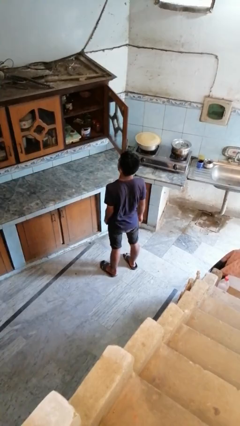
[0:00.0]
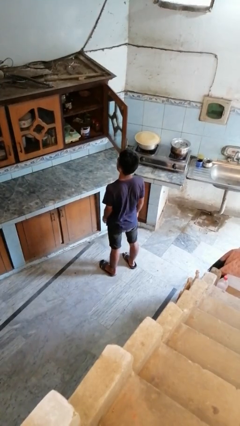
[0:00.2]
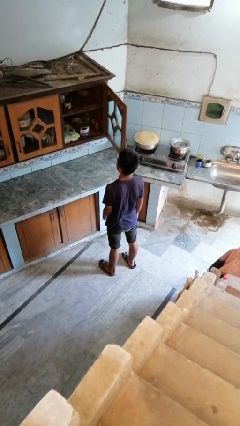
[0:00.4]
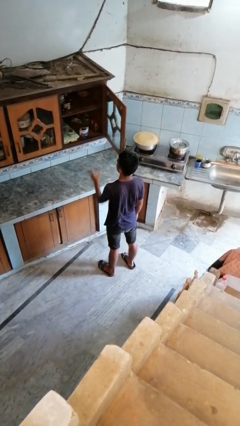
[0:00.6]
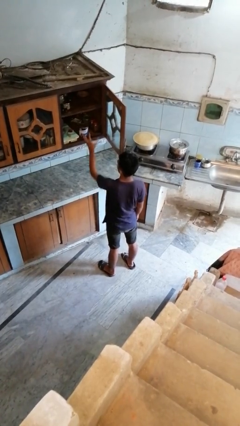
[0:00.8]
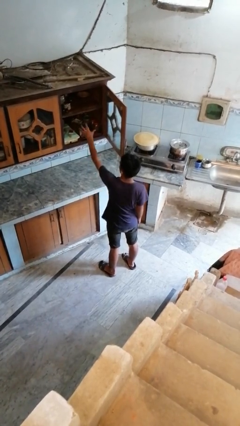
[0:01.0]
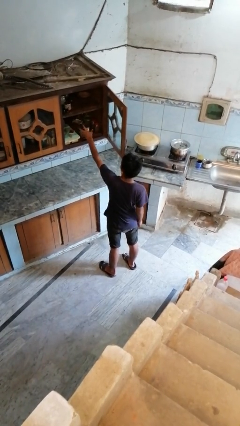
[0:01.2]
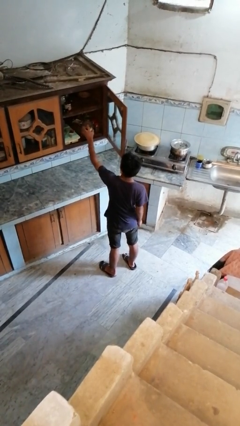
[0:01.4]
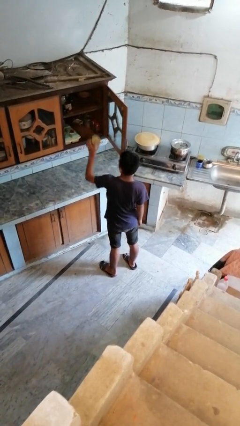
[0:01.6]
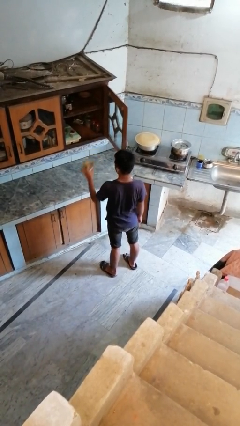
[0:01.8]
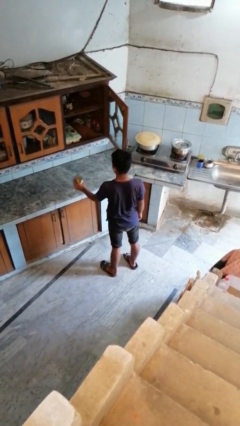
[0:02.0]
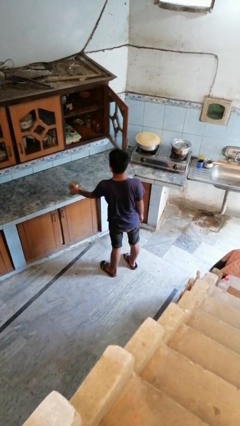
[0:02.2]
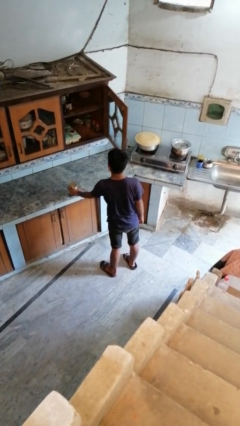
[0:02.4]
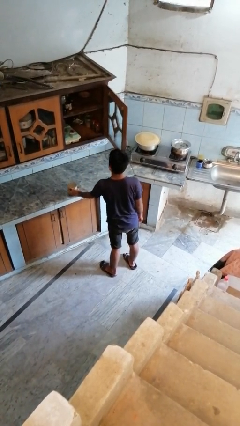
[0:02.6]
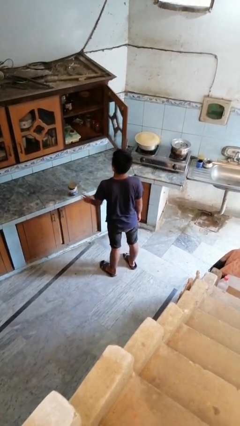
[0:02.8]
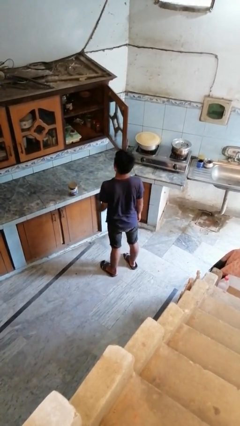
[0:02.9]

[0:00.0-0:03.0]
person takes object from cabinet

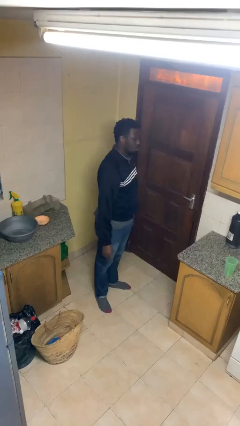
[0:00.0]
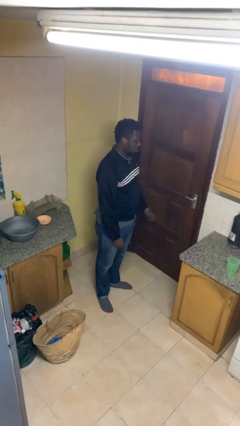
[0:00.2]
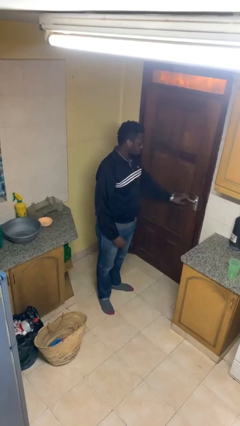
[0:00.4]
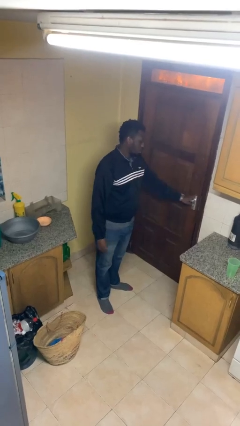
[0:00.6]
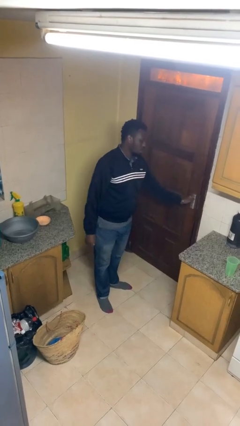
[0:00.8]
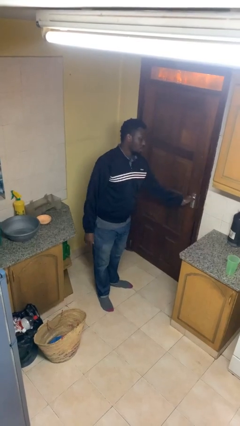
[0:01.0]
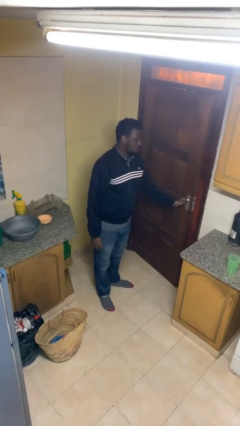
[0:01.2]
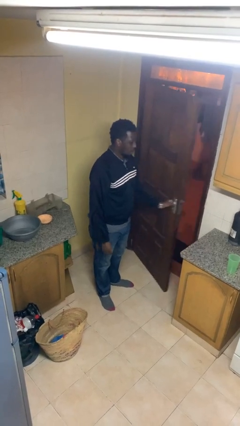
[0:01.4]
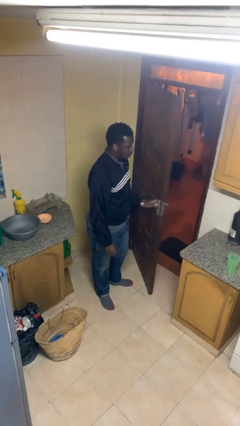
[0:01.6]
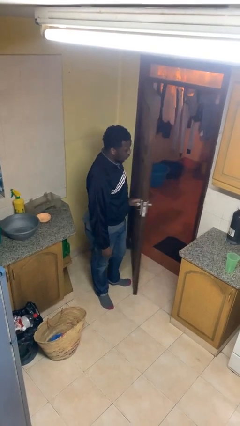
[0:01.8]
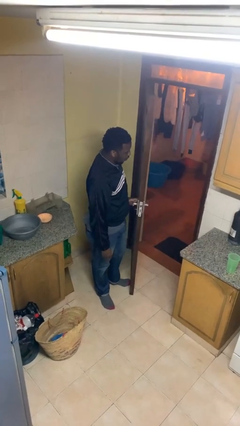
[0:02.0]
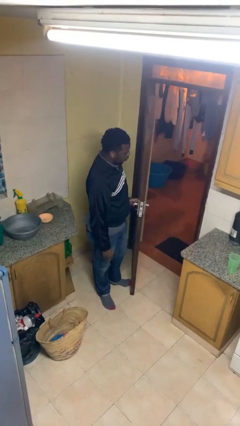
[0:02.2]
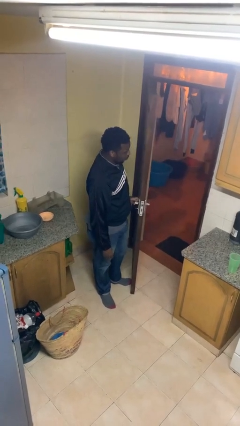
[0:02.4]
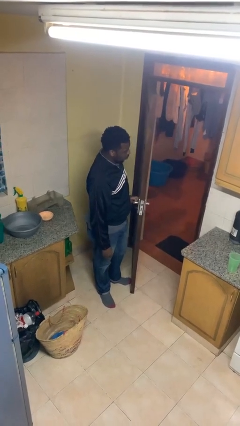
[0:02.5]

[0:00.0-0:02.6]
person opens facility door

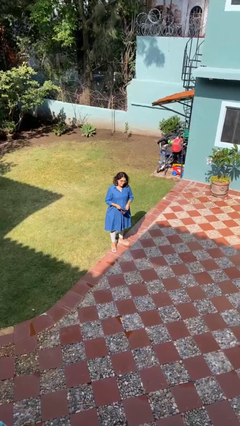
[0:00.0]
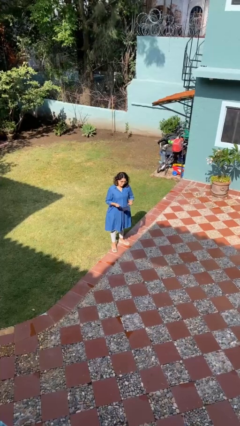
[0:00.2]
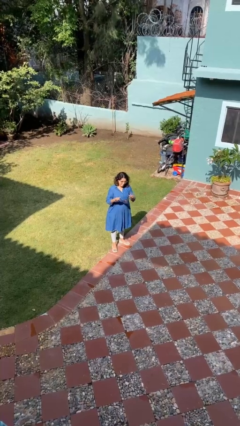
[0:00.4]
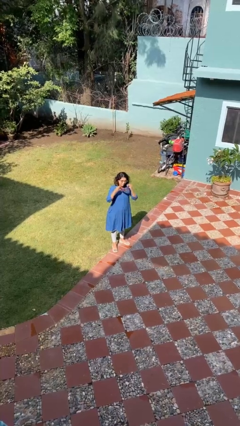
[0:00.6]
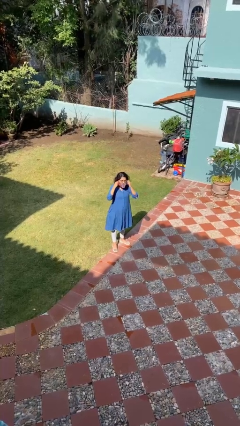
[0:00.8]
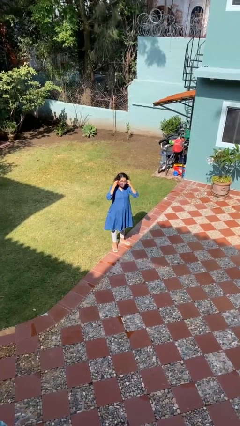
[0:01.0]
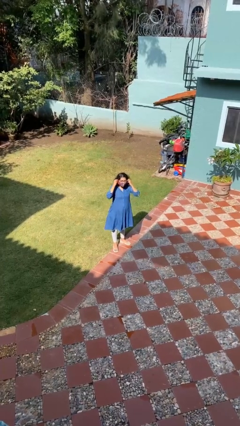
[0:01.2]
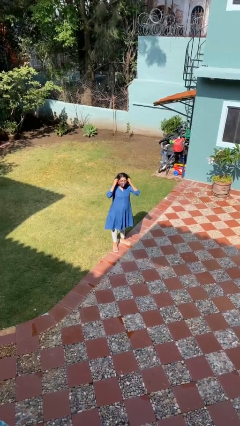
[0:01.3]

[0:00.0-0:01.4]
person puts on facemask

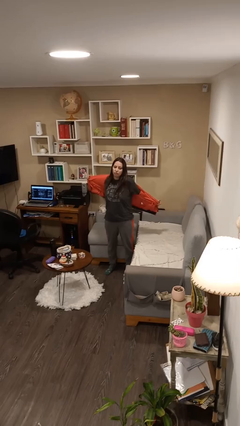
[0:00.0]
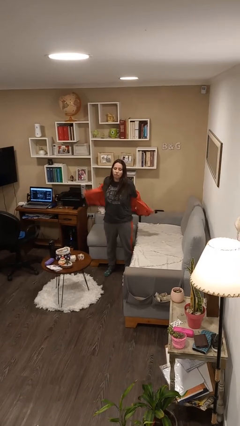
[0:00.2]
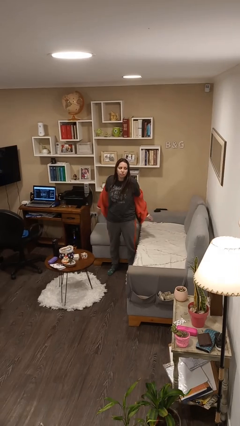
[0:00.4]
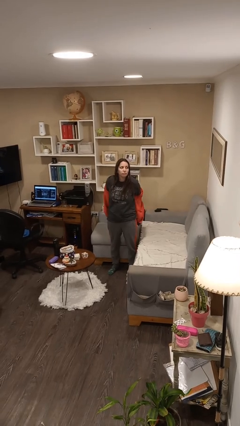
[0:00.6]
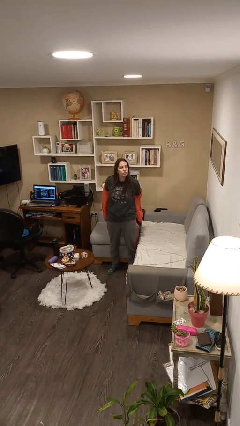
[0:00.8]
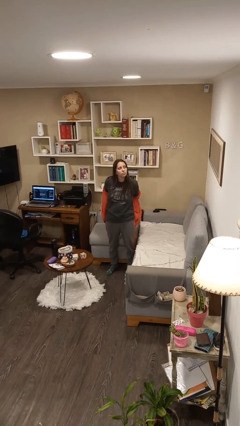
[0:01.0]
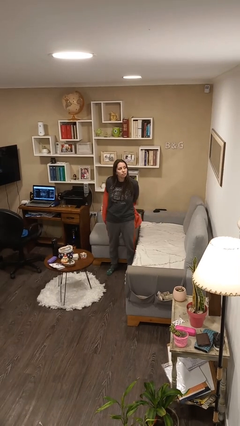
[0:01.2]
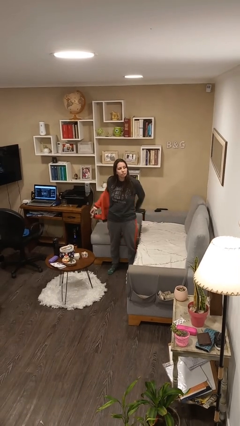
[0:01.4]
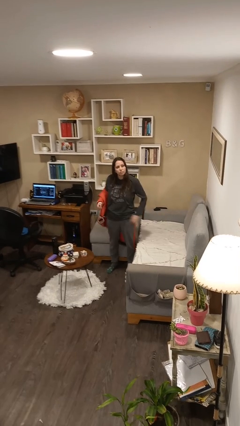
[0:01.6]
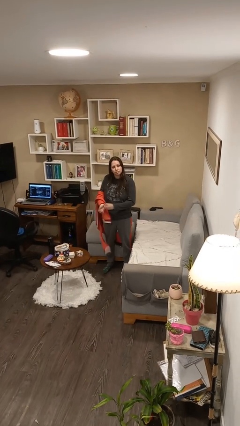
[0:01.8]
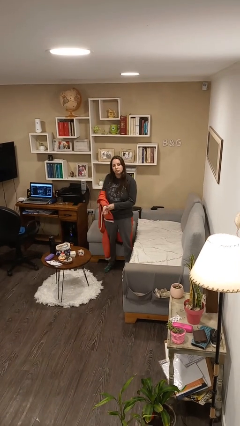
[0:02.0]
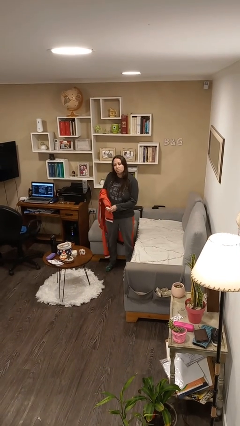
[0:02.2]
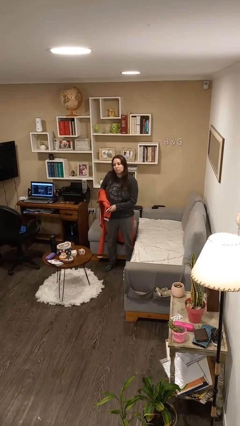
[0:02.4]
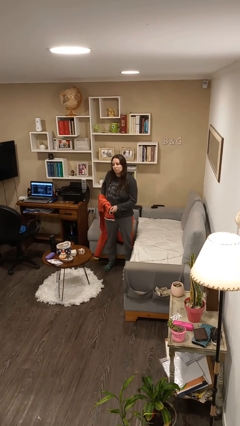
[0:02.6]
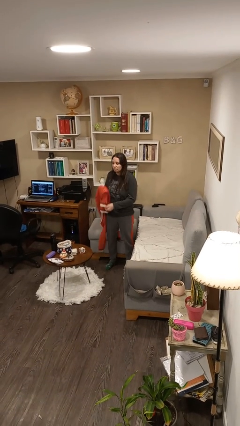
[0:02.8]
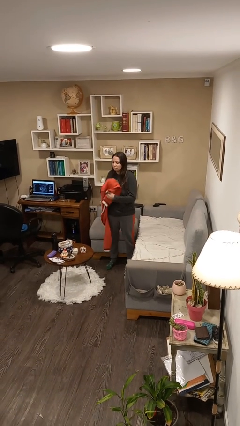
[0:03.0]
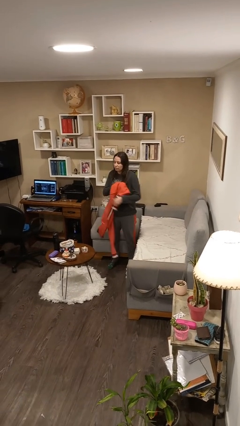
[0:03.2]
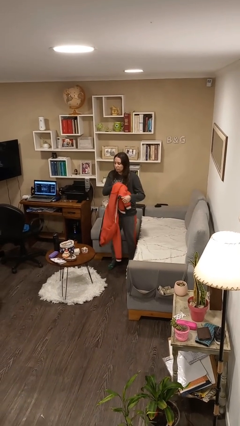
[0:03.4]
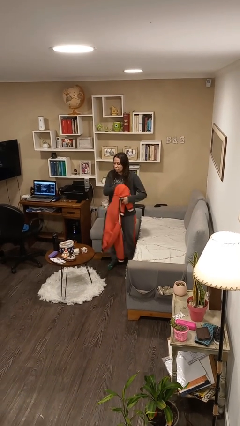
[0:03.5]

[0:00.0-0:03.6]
person takes off jacket

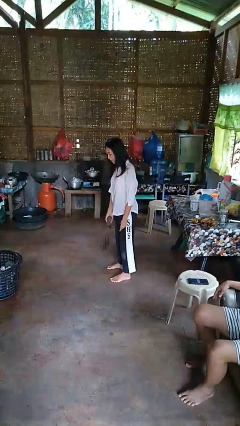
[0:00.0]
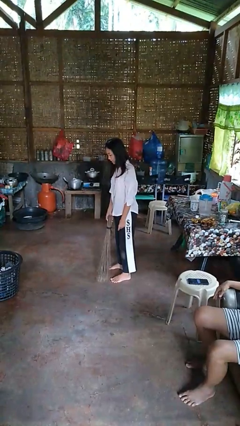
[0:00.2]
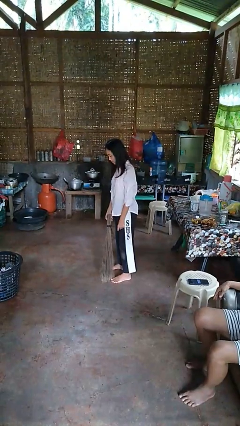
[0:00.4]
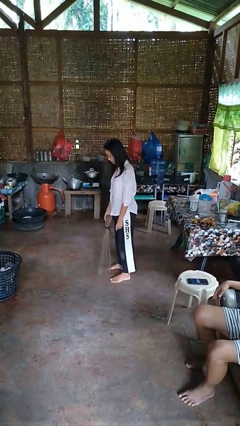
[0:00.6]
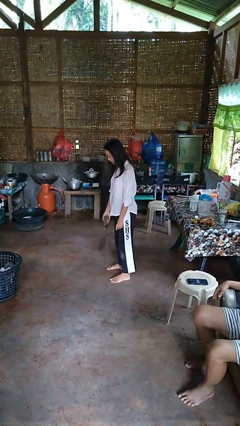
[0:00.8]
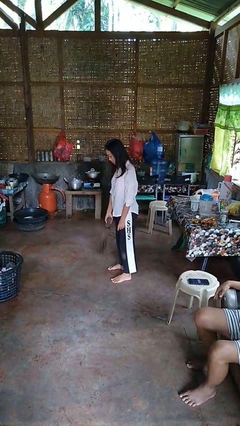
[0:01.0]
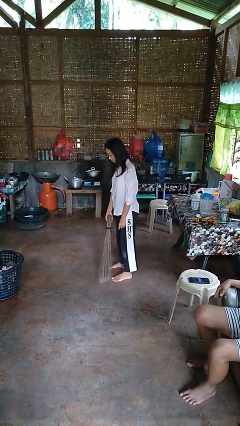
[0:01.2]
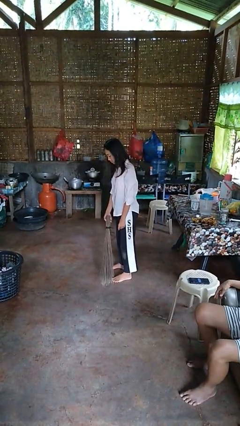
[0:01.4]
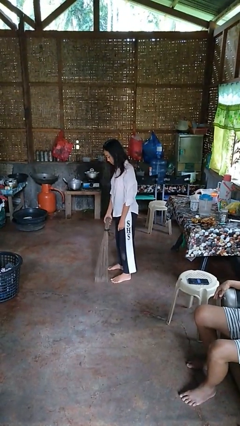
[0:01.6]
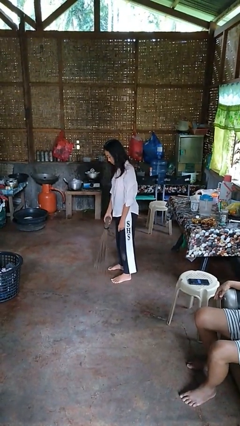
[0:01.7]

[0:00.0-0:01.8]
person sweeps floor

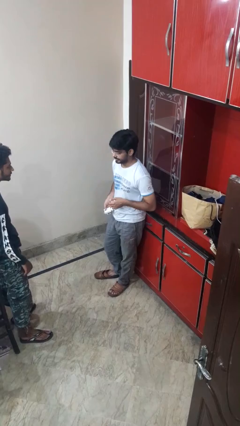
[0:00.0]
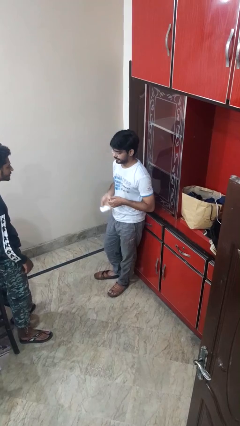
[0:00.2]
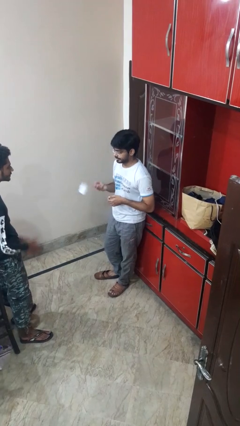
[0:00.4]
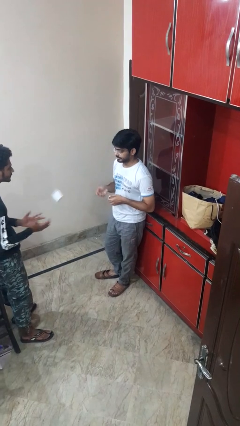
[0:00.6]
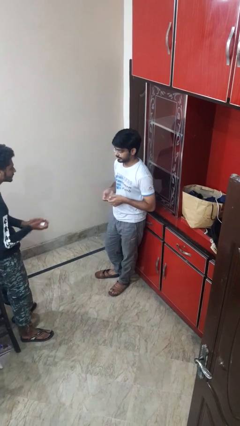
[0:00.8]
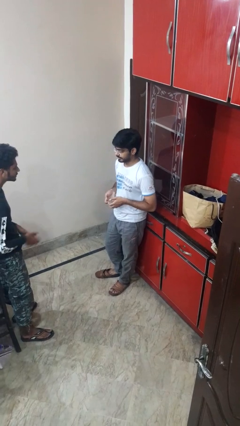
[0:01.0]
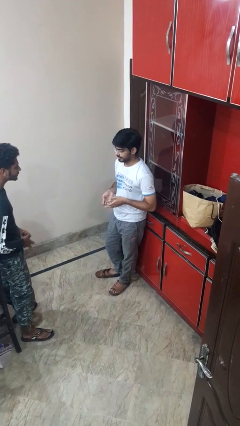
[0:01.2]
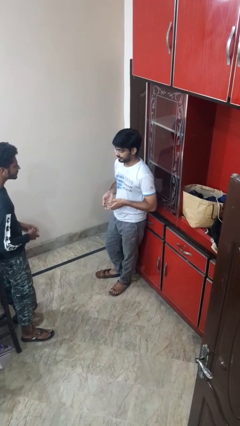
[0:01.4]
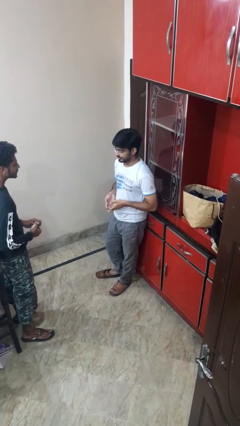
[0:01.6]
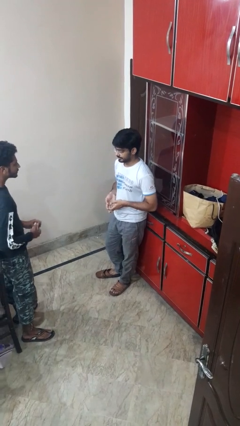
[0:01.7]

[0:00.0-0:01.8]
person throws object to person

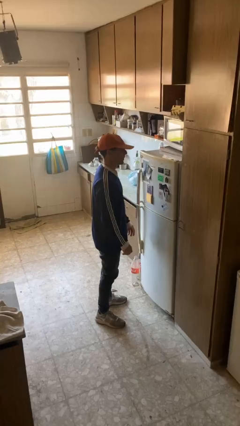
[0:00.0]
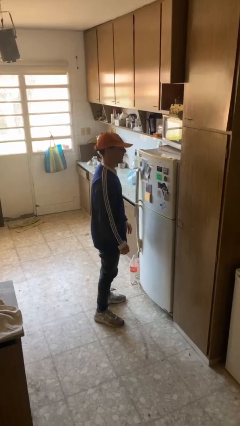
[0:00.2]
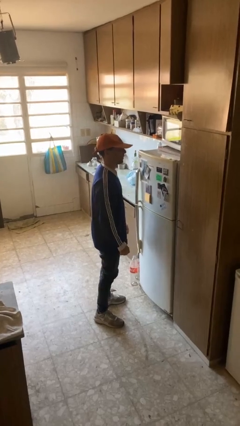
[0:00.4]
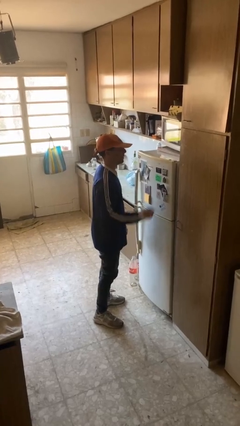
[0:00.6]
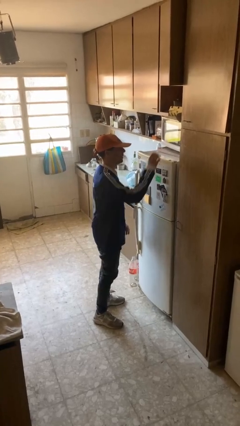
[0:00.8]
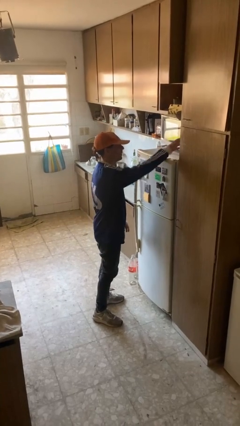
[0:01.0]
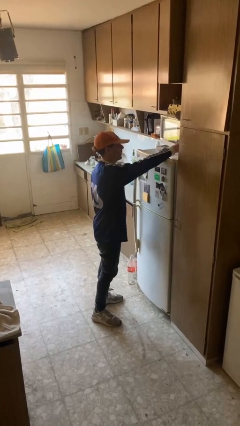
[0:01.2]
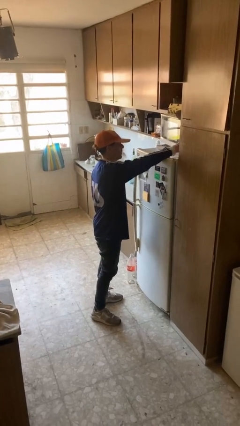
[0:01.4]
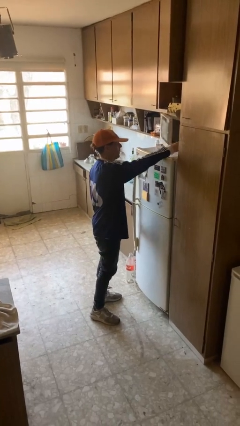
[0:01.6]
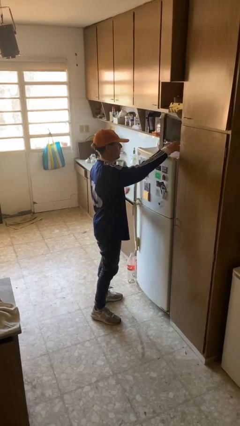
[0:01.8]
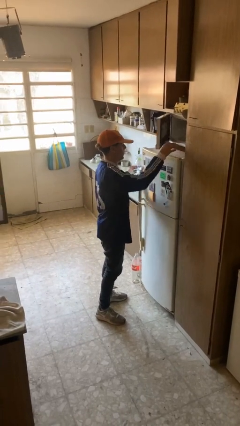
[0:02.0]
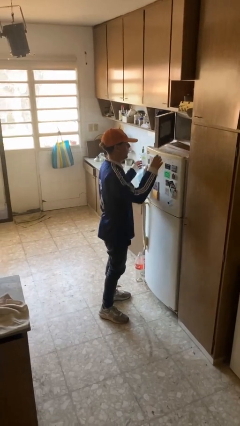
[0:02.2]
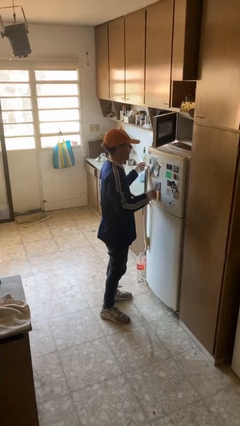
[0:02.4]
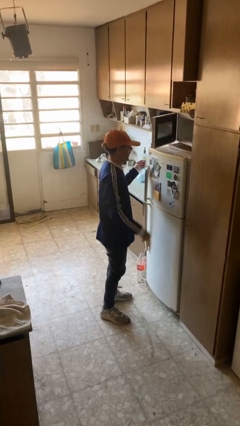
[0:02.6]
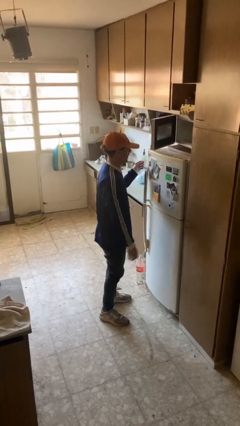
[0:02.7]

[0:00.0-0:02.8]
person opens microwave
